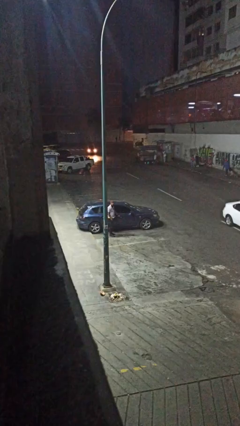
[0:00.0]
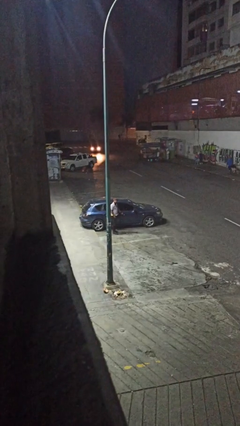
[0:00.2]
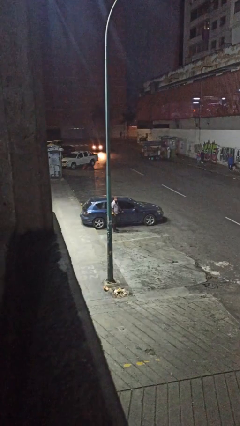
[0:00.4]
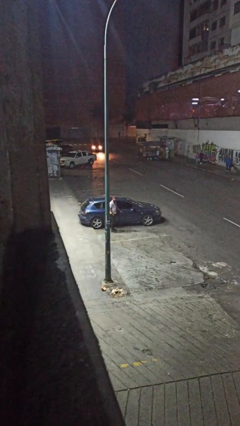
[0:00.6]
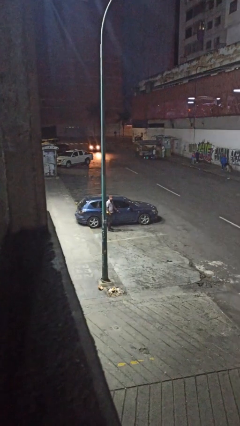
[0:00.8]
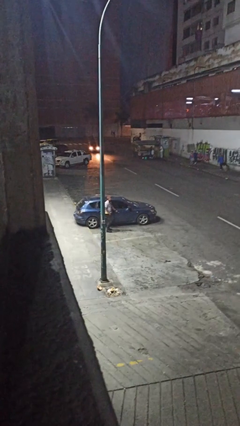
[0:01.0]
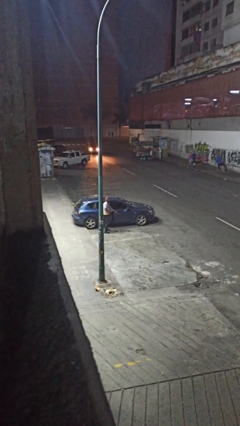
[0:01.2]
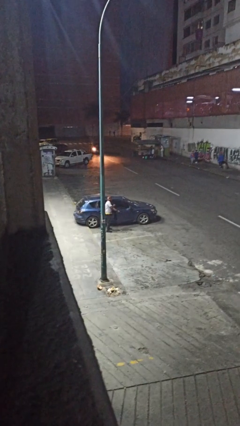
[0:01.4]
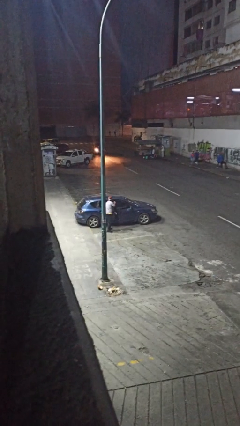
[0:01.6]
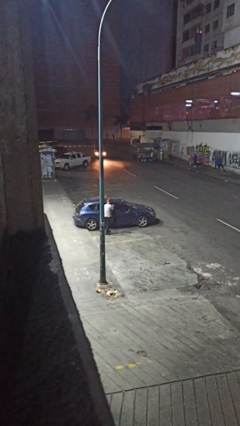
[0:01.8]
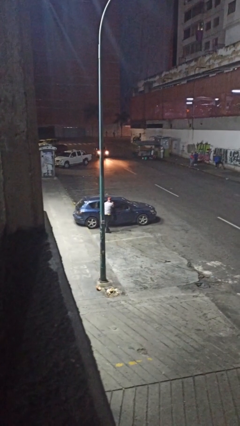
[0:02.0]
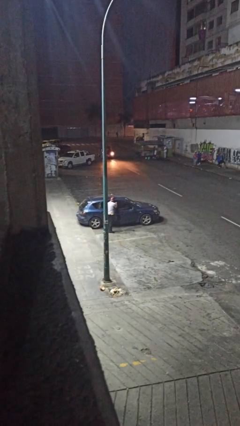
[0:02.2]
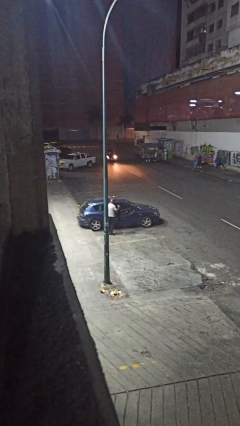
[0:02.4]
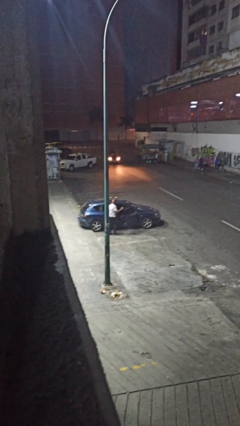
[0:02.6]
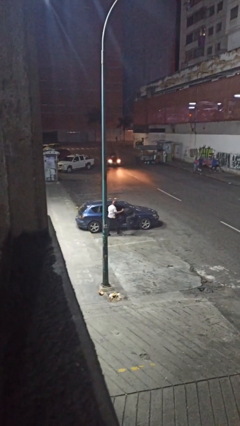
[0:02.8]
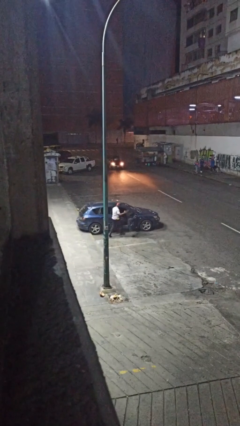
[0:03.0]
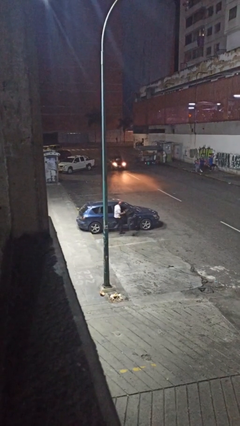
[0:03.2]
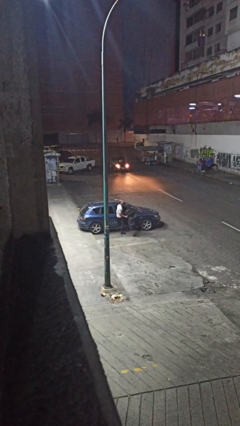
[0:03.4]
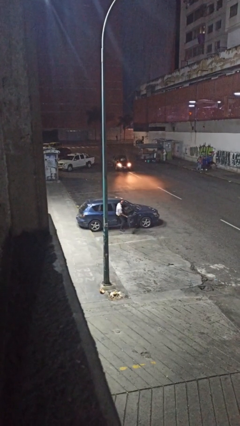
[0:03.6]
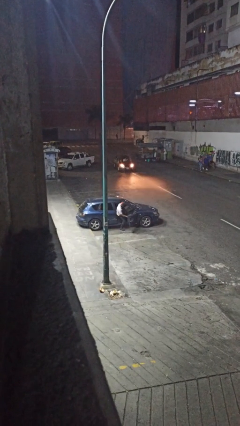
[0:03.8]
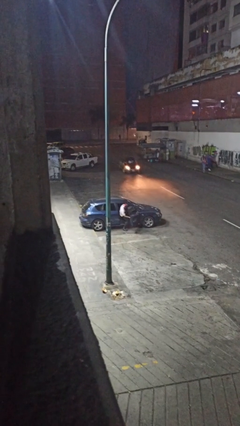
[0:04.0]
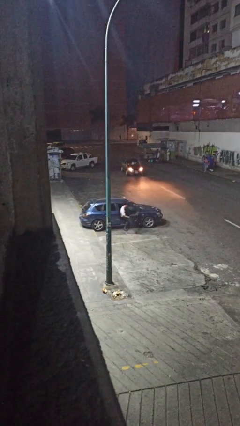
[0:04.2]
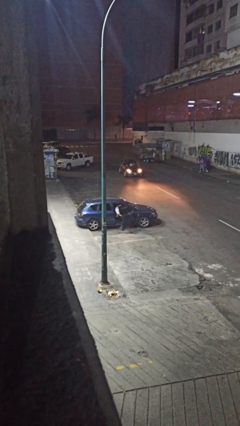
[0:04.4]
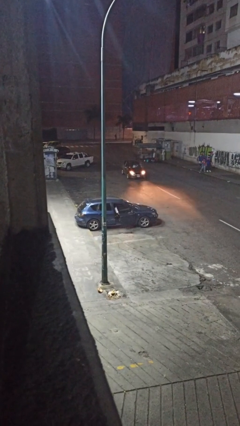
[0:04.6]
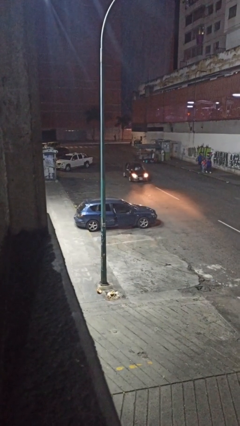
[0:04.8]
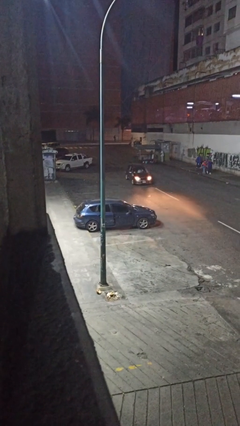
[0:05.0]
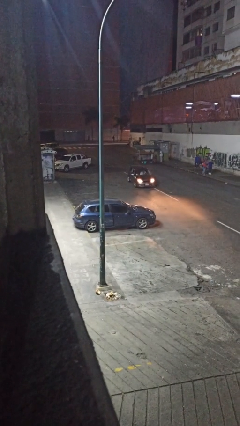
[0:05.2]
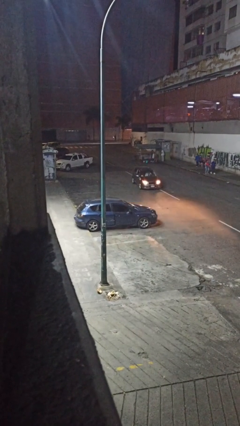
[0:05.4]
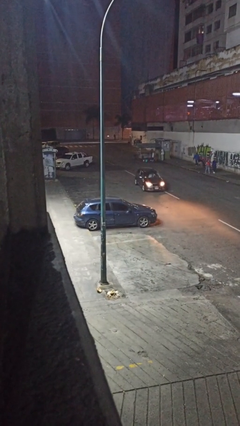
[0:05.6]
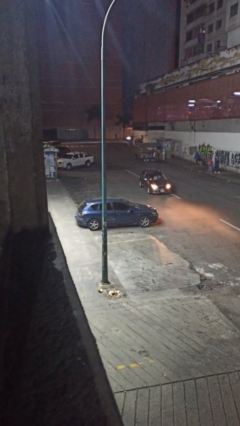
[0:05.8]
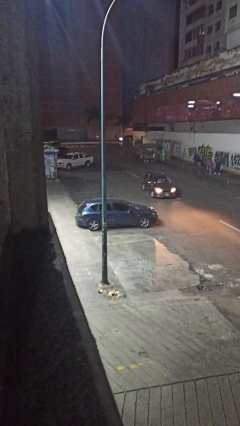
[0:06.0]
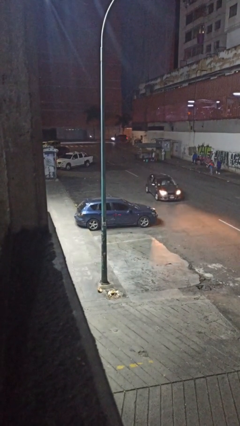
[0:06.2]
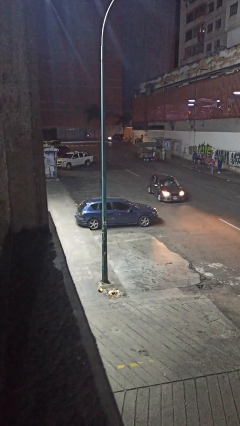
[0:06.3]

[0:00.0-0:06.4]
car picks up person

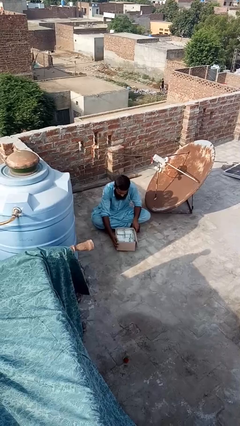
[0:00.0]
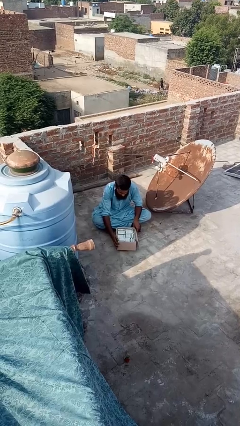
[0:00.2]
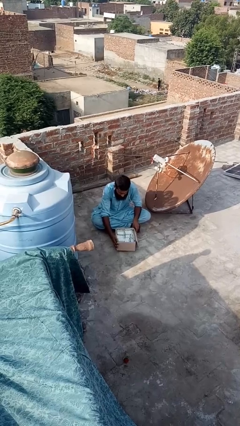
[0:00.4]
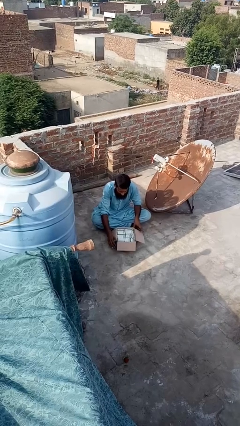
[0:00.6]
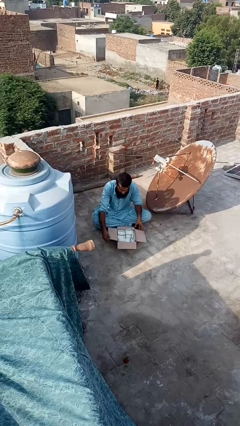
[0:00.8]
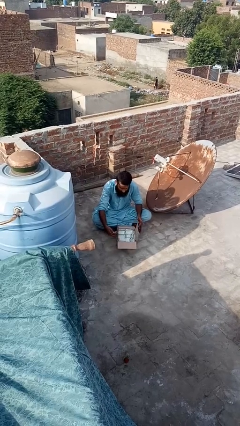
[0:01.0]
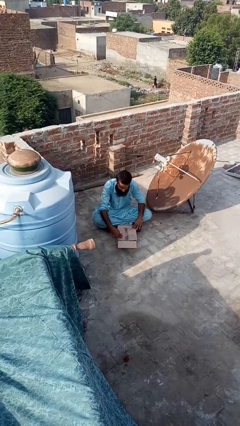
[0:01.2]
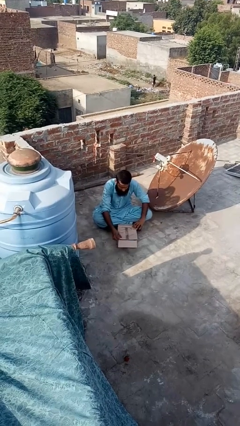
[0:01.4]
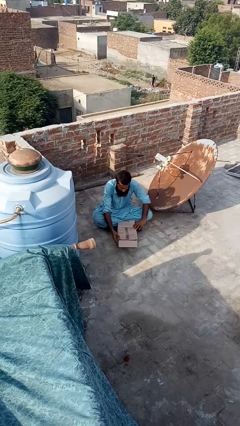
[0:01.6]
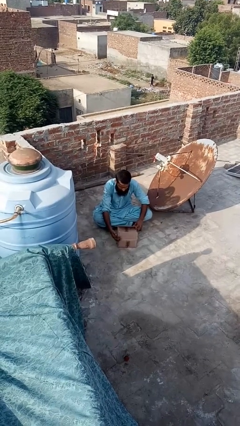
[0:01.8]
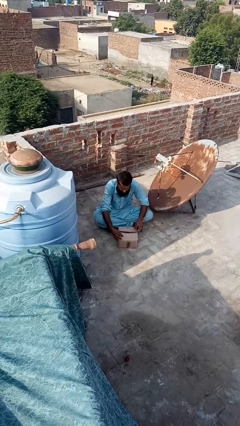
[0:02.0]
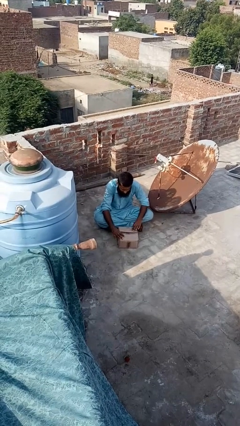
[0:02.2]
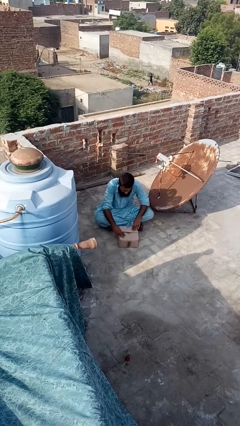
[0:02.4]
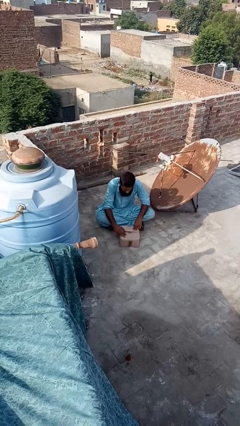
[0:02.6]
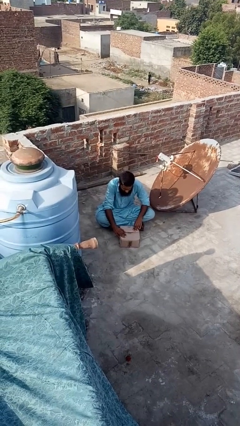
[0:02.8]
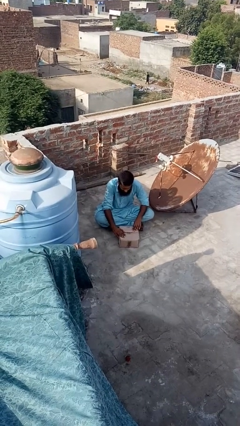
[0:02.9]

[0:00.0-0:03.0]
person closes box

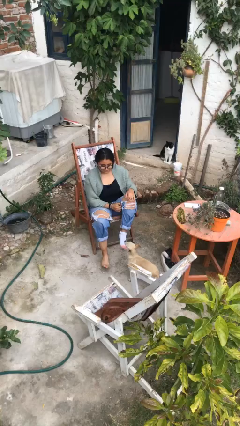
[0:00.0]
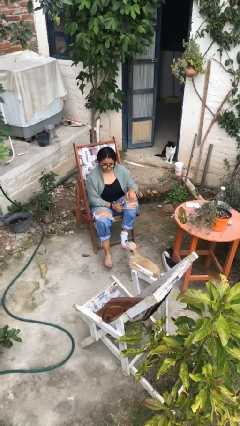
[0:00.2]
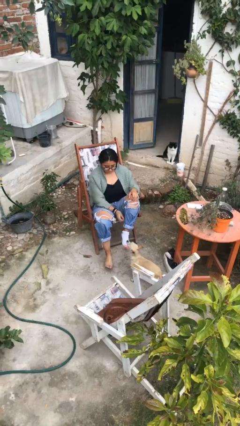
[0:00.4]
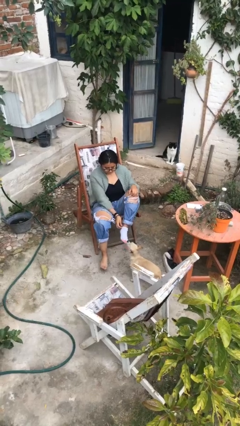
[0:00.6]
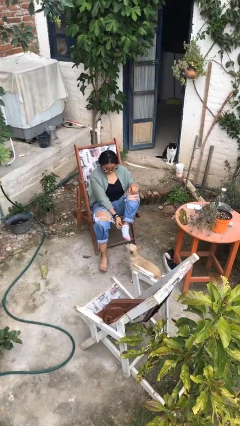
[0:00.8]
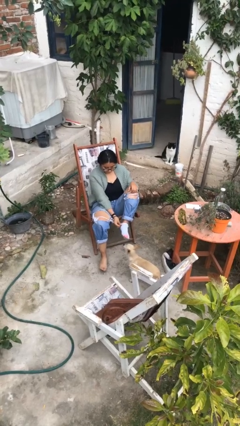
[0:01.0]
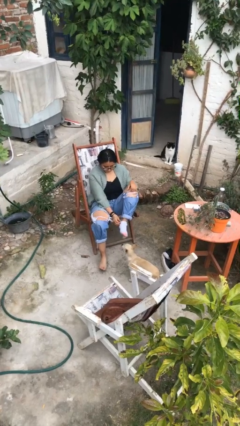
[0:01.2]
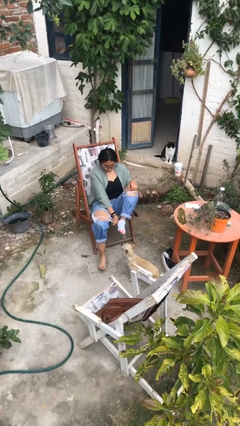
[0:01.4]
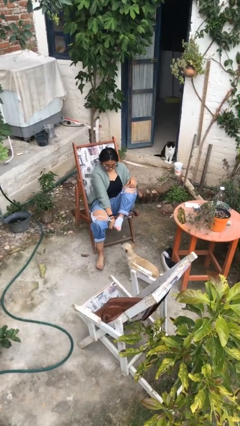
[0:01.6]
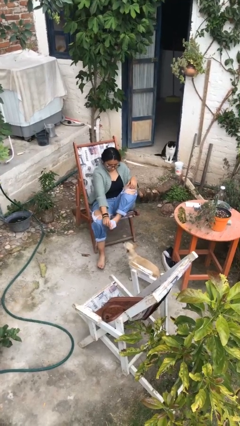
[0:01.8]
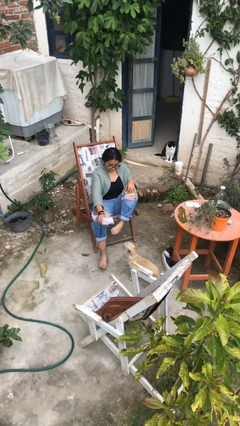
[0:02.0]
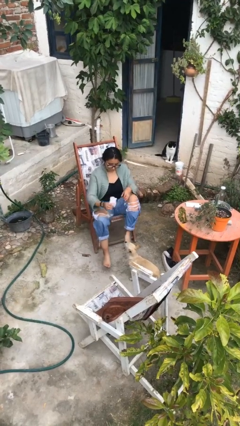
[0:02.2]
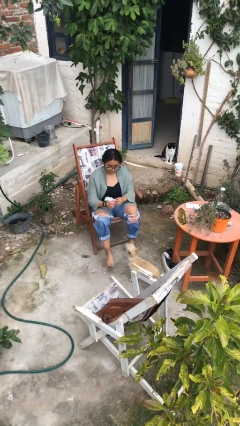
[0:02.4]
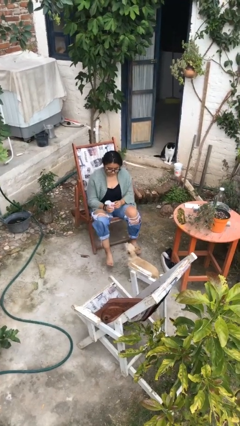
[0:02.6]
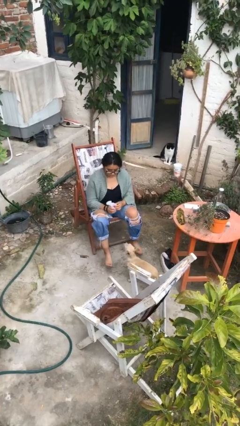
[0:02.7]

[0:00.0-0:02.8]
person takes off socks

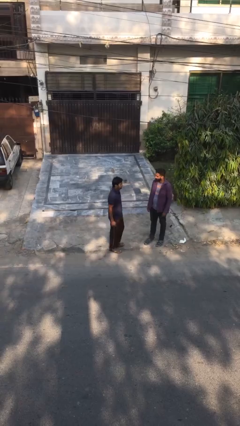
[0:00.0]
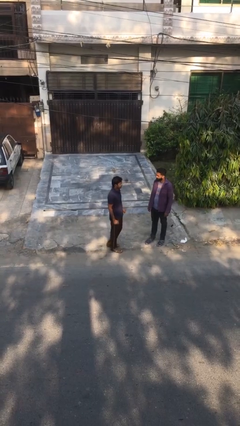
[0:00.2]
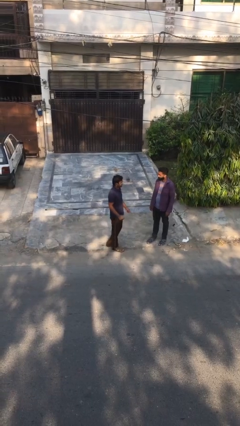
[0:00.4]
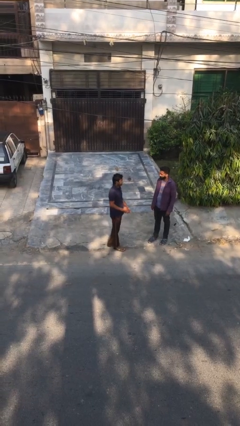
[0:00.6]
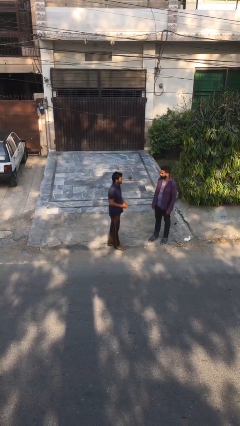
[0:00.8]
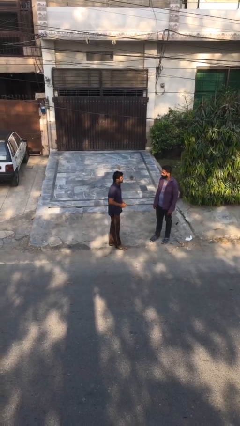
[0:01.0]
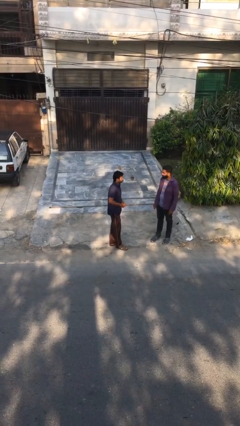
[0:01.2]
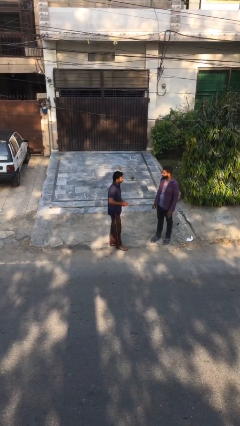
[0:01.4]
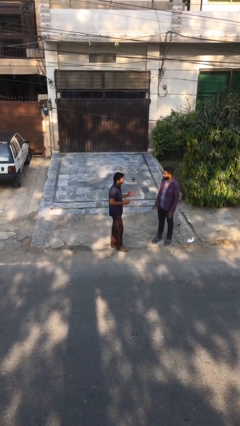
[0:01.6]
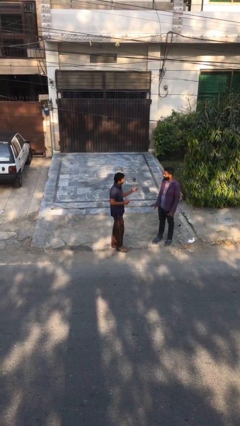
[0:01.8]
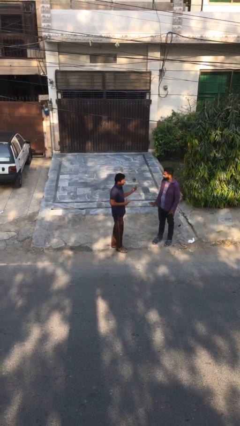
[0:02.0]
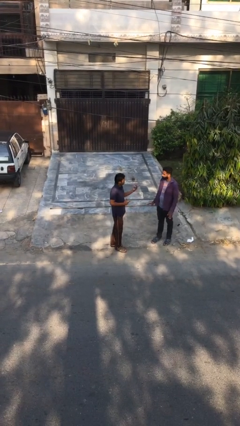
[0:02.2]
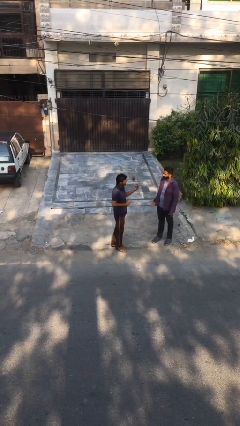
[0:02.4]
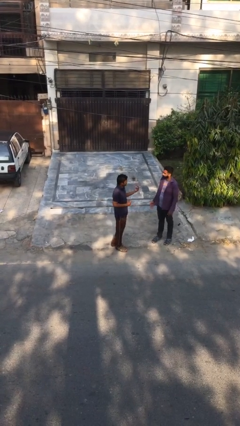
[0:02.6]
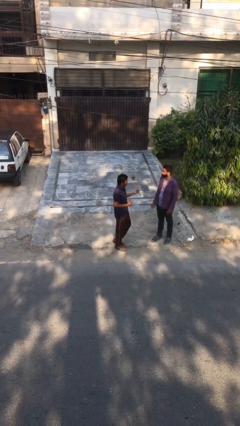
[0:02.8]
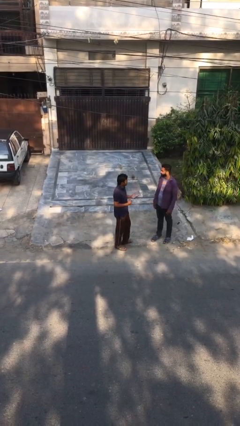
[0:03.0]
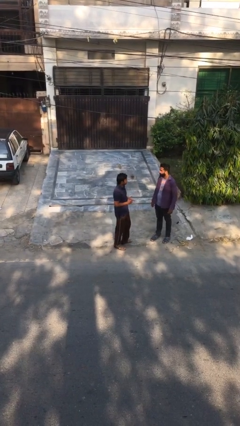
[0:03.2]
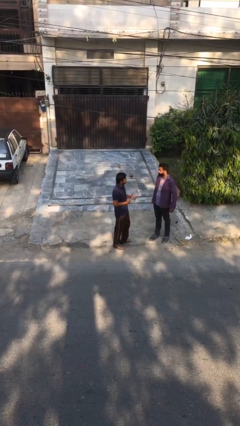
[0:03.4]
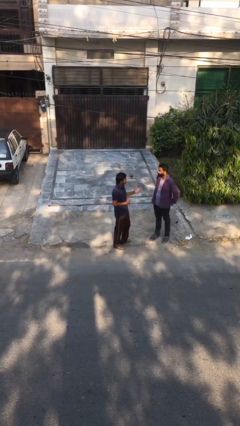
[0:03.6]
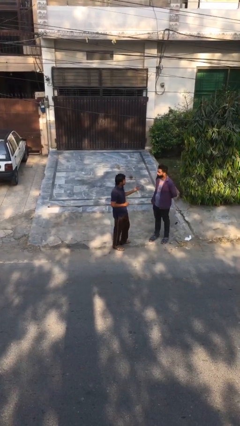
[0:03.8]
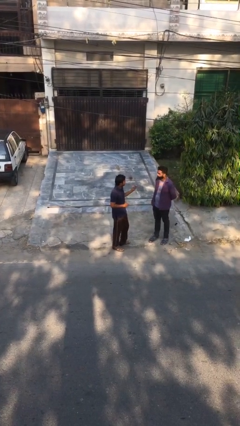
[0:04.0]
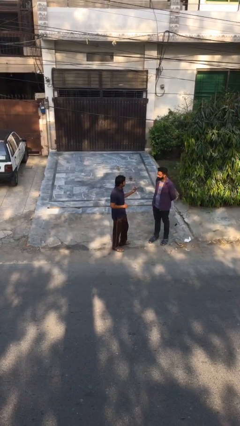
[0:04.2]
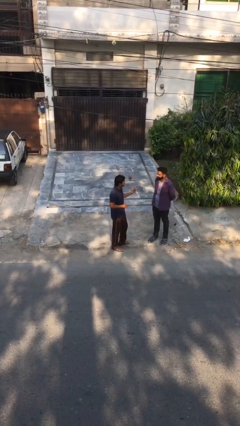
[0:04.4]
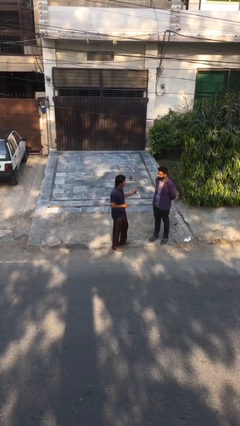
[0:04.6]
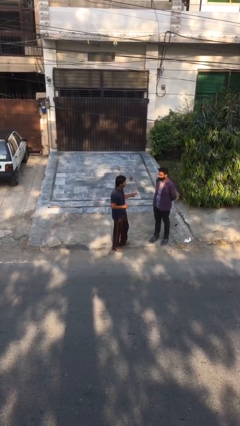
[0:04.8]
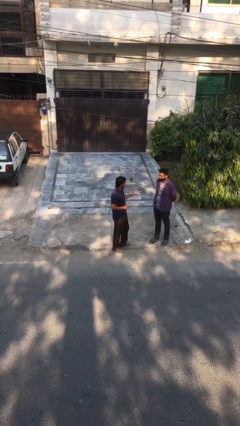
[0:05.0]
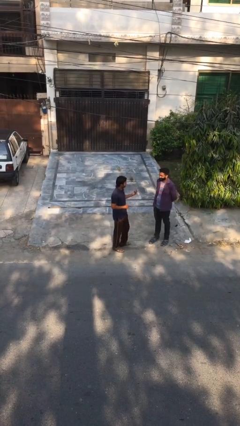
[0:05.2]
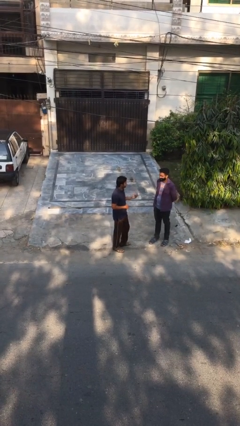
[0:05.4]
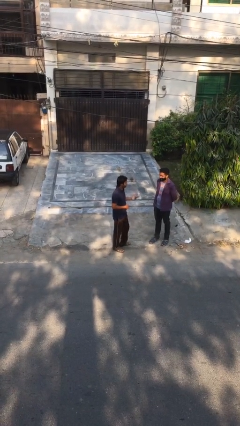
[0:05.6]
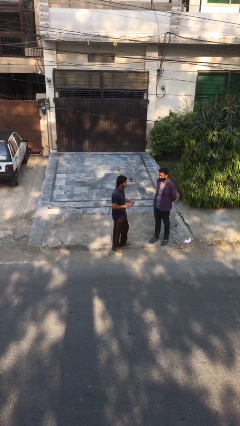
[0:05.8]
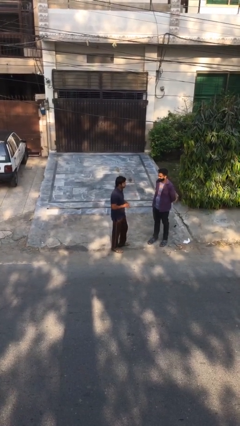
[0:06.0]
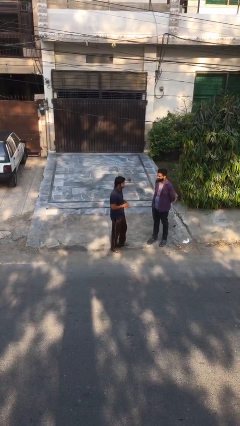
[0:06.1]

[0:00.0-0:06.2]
person talks to person
